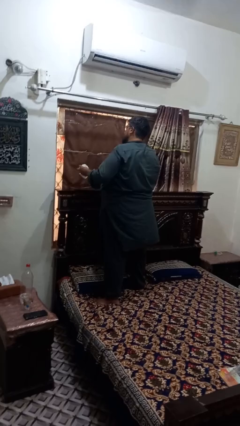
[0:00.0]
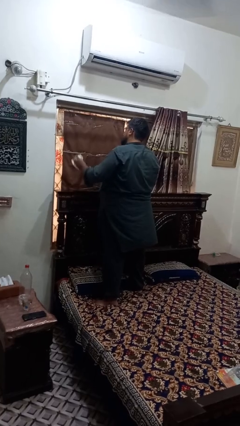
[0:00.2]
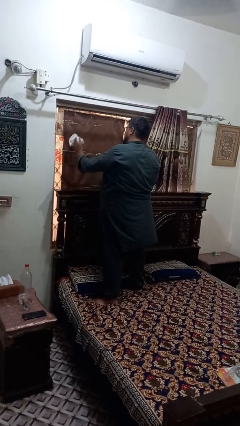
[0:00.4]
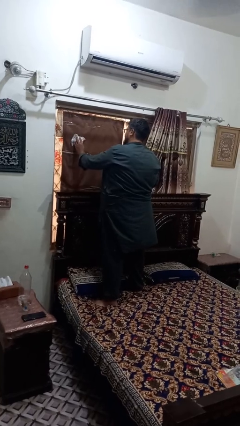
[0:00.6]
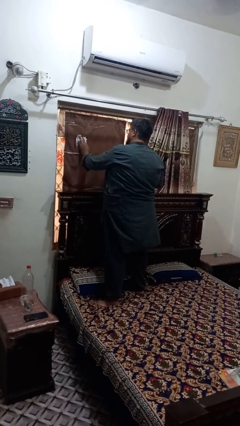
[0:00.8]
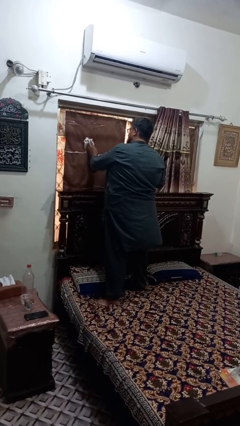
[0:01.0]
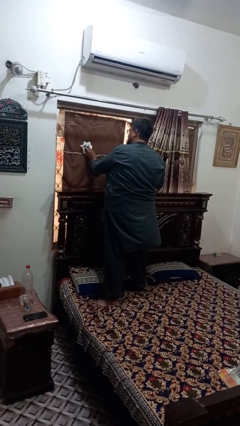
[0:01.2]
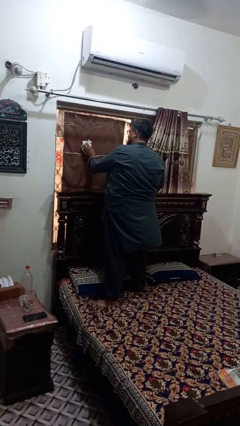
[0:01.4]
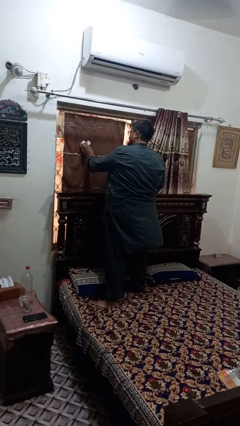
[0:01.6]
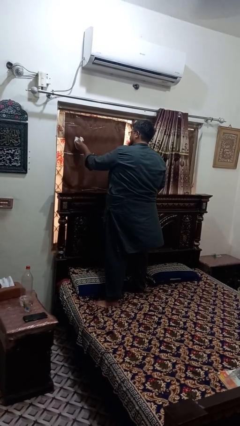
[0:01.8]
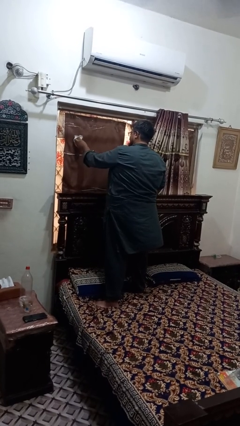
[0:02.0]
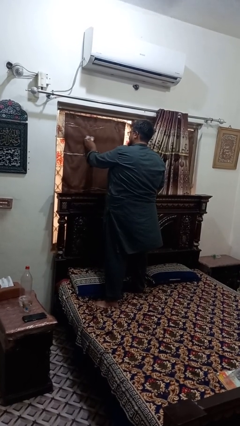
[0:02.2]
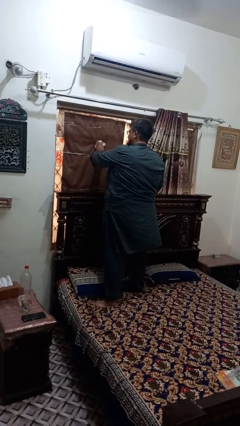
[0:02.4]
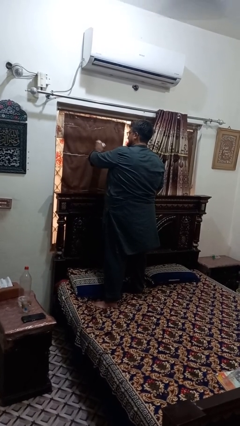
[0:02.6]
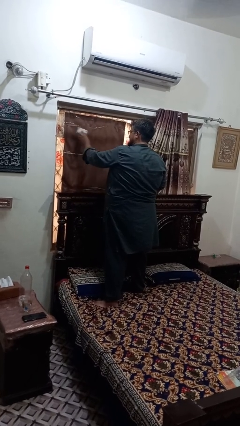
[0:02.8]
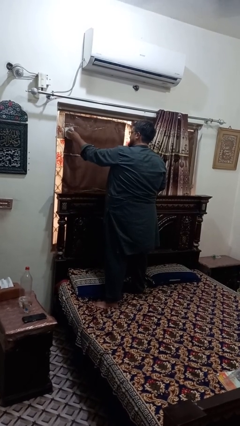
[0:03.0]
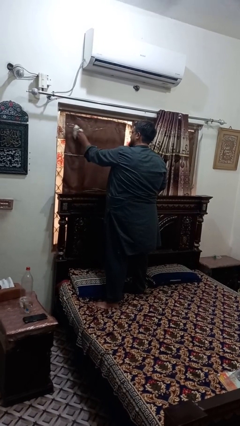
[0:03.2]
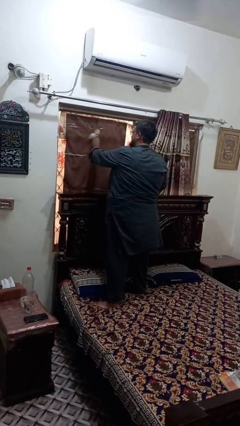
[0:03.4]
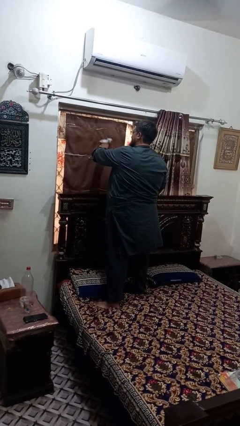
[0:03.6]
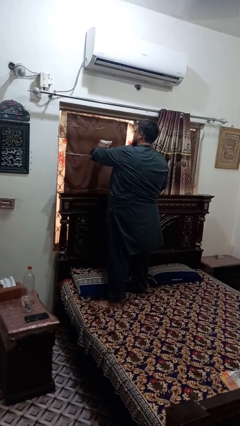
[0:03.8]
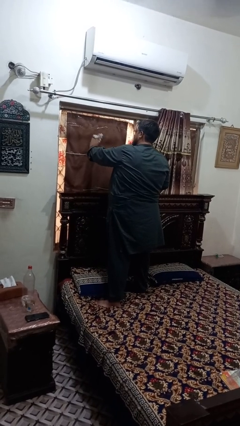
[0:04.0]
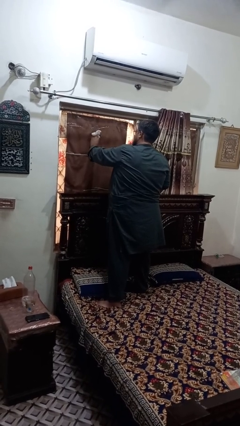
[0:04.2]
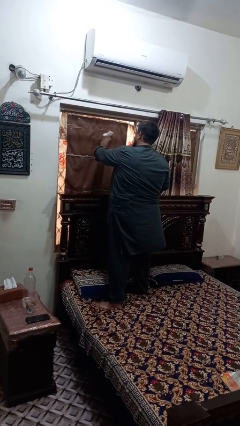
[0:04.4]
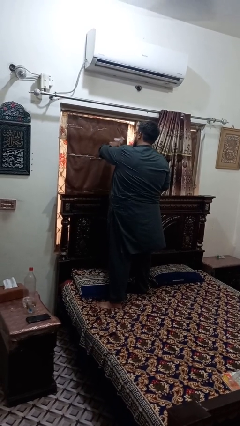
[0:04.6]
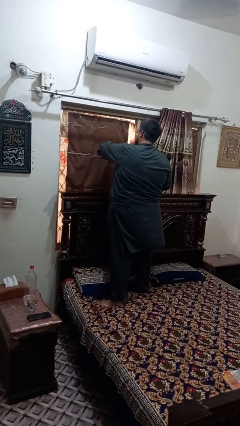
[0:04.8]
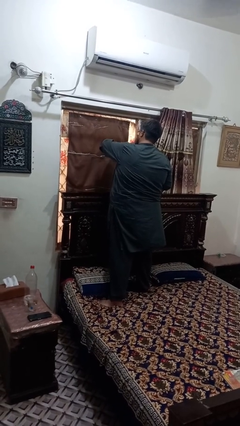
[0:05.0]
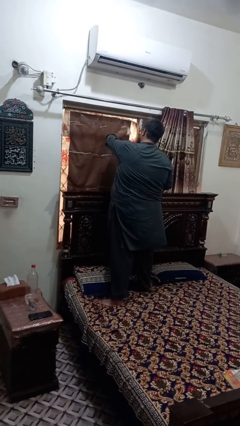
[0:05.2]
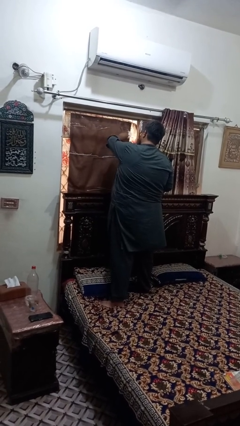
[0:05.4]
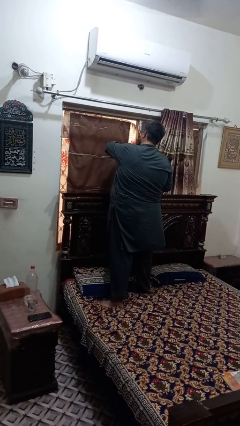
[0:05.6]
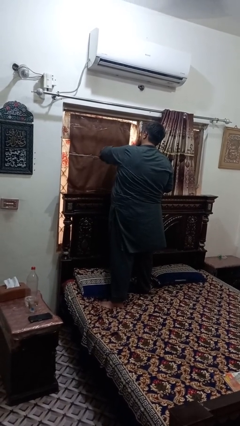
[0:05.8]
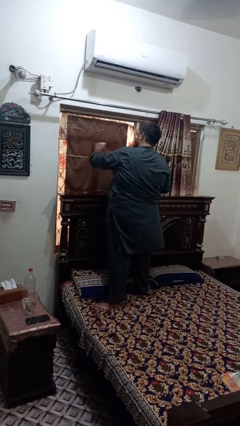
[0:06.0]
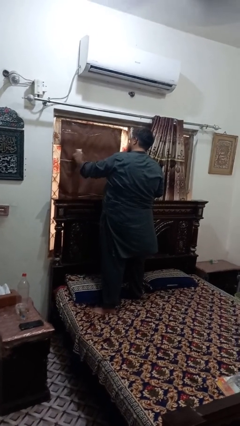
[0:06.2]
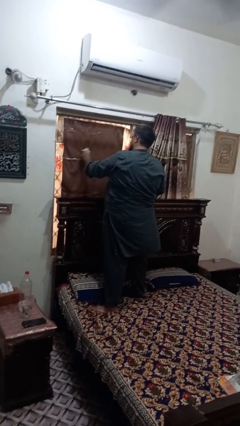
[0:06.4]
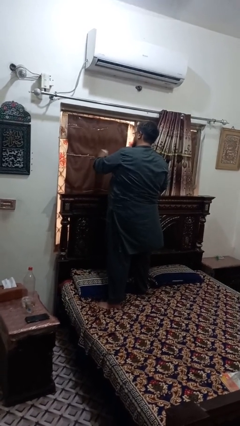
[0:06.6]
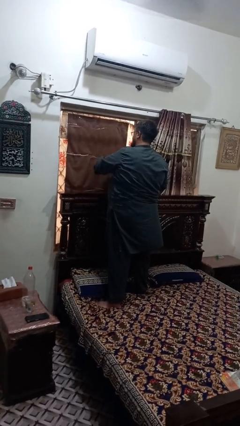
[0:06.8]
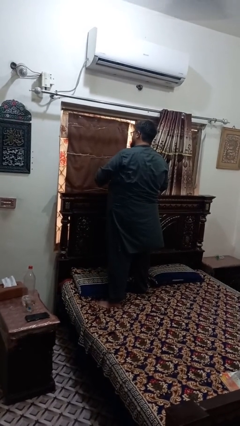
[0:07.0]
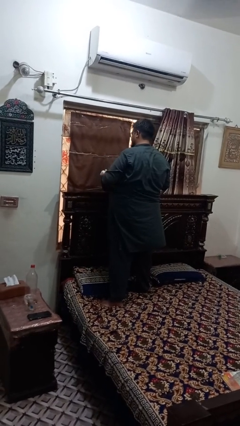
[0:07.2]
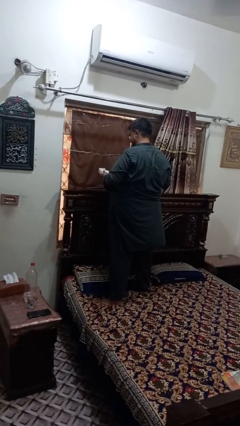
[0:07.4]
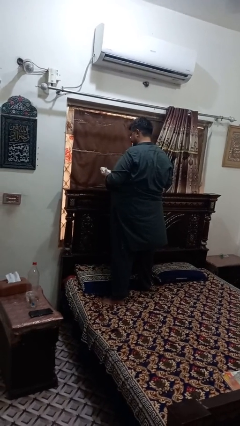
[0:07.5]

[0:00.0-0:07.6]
person washes window

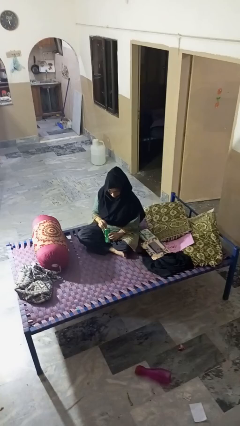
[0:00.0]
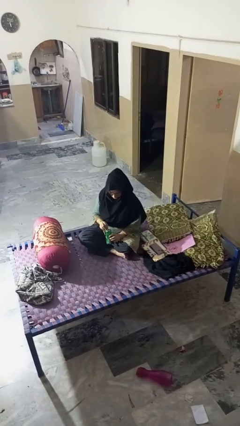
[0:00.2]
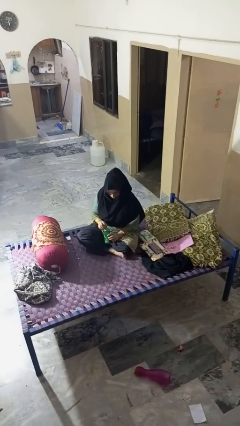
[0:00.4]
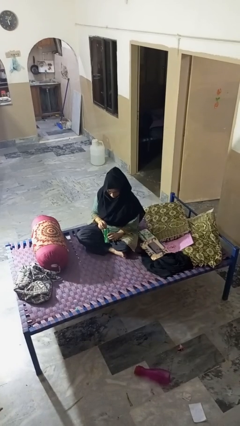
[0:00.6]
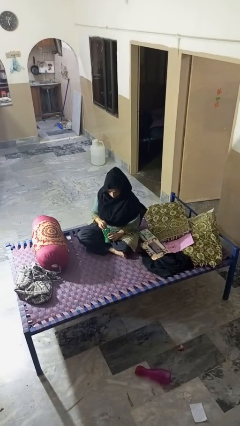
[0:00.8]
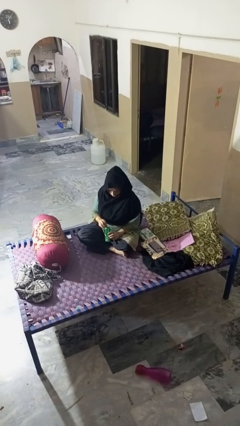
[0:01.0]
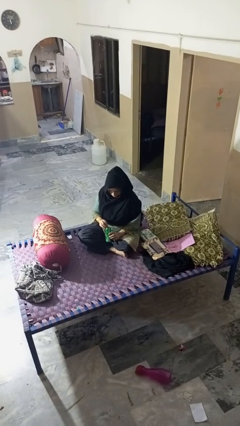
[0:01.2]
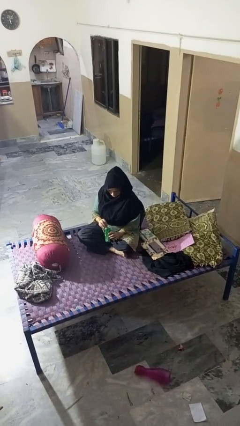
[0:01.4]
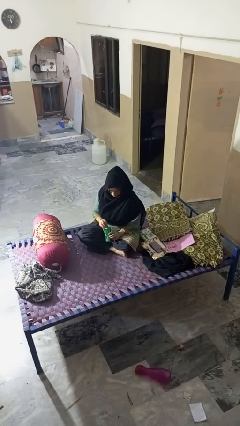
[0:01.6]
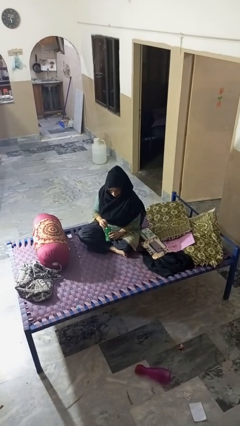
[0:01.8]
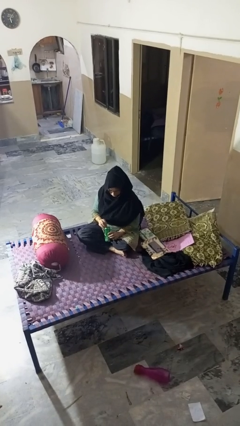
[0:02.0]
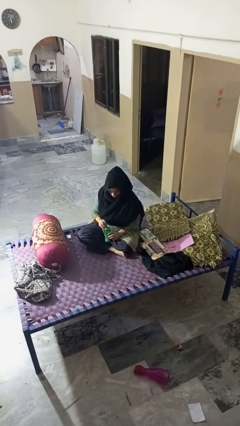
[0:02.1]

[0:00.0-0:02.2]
person opens can with can opener

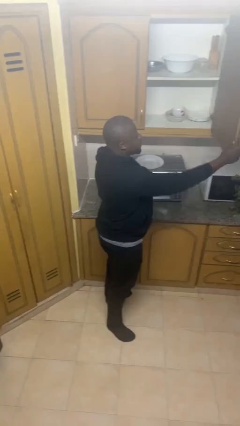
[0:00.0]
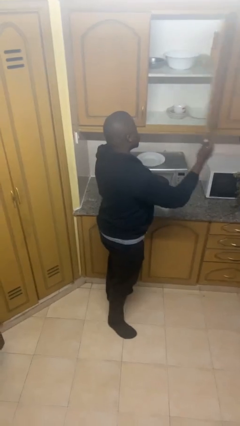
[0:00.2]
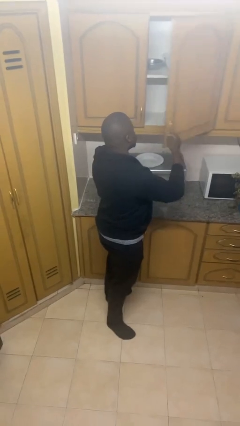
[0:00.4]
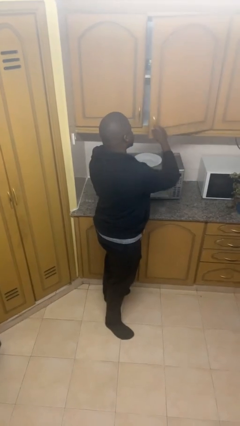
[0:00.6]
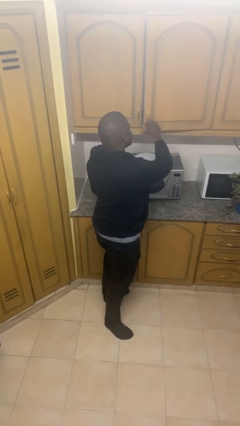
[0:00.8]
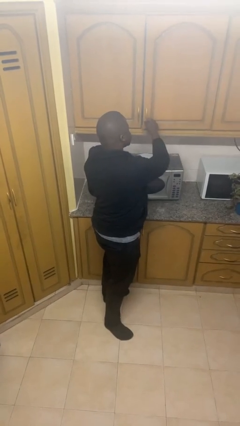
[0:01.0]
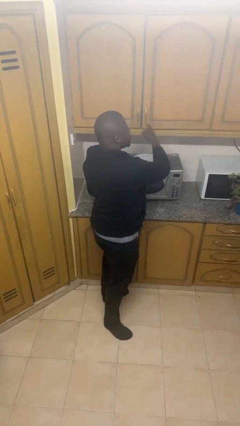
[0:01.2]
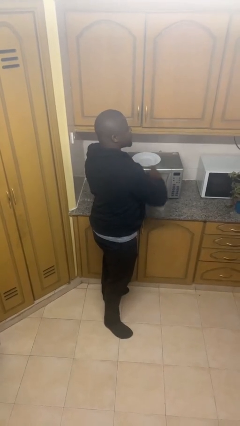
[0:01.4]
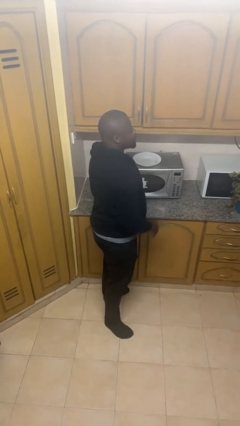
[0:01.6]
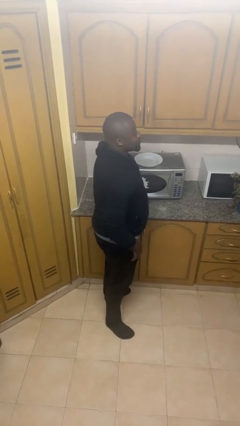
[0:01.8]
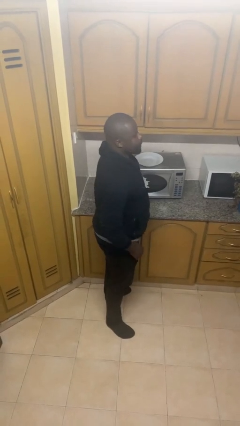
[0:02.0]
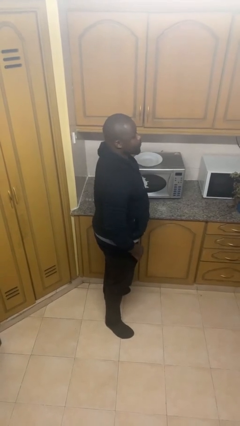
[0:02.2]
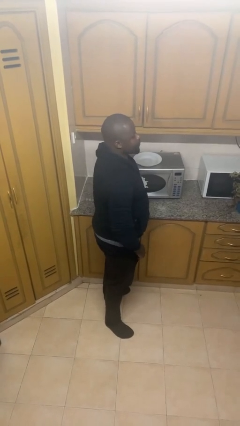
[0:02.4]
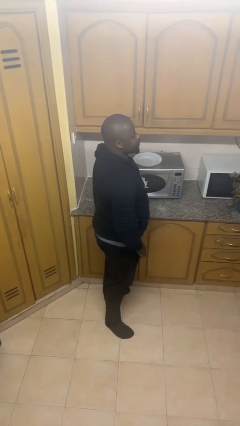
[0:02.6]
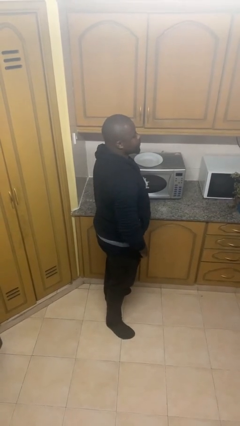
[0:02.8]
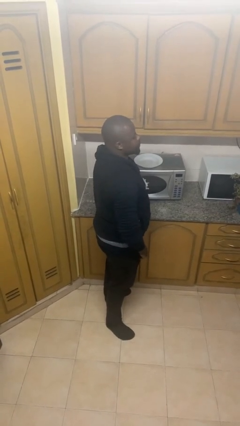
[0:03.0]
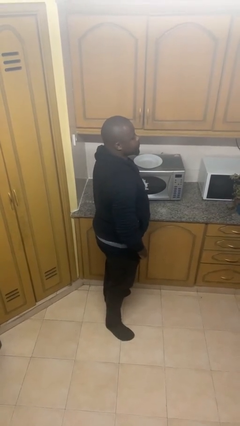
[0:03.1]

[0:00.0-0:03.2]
person closes cabinet

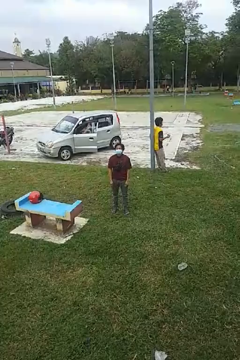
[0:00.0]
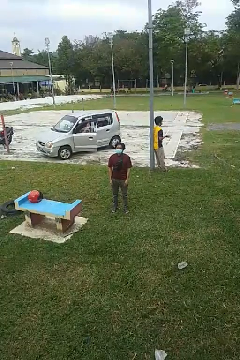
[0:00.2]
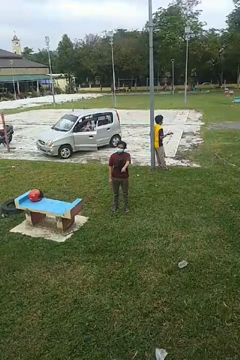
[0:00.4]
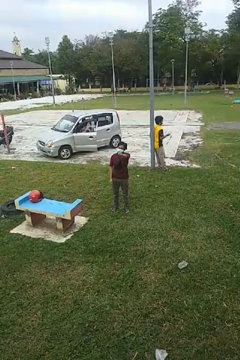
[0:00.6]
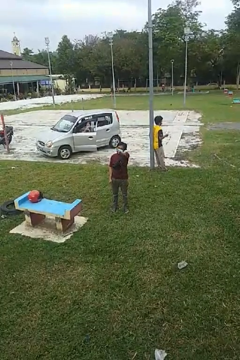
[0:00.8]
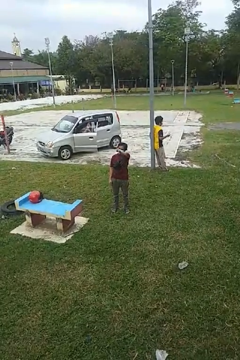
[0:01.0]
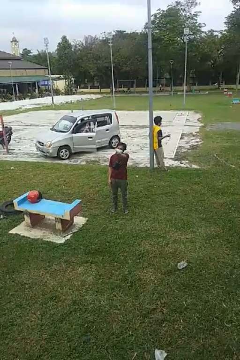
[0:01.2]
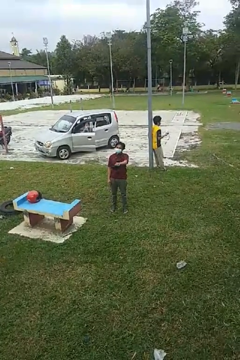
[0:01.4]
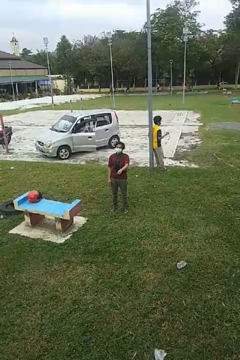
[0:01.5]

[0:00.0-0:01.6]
person points at person

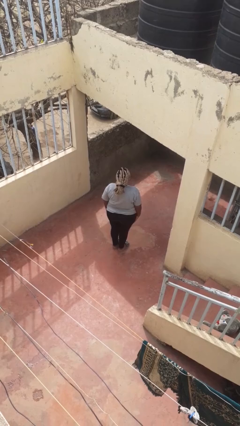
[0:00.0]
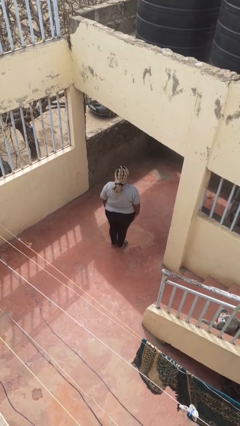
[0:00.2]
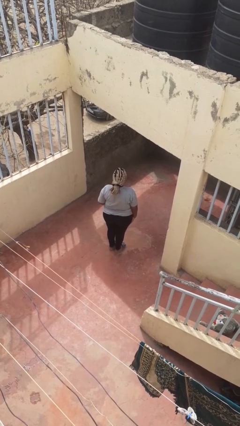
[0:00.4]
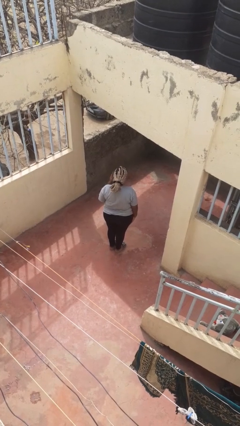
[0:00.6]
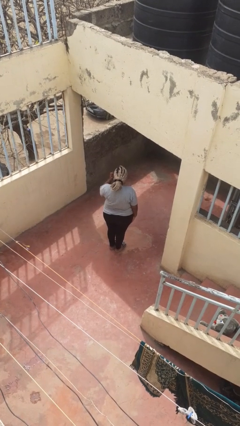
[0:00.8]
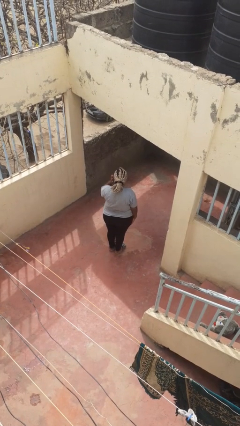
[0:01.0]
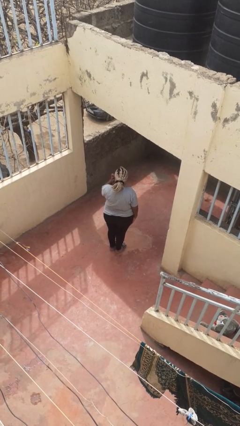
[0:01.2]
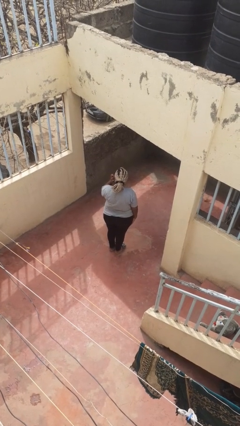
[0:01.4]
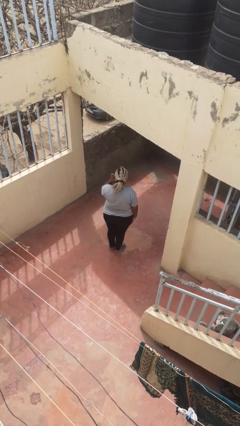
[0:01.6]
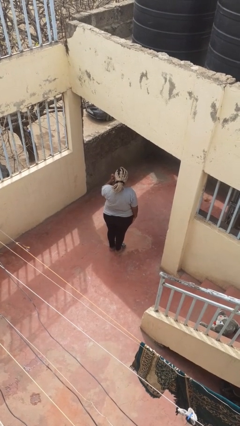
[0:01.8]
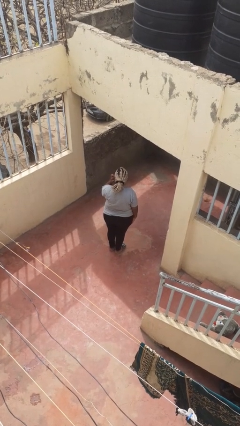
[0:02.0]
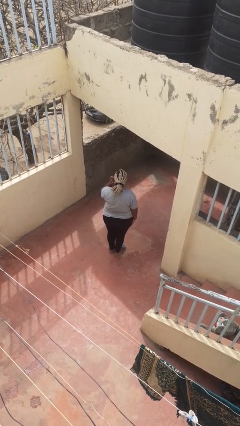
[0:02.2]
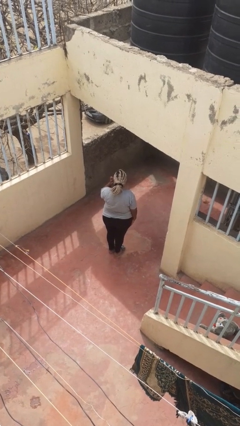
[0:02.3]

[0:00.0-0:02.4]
person gestures listen closely

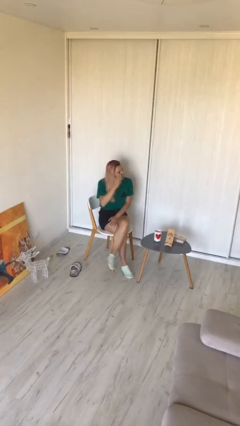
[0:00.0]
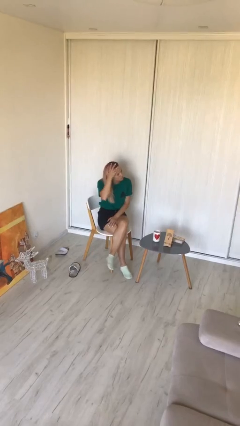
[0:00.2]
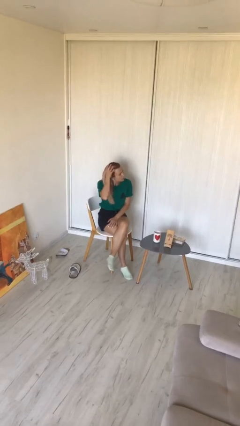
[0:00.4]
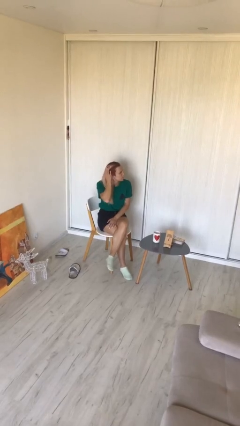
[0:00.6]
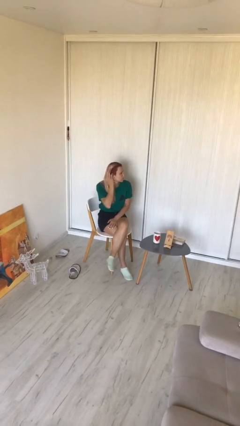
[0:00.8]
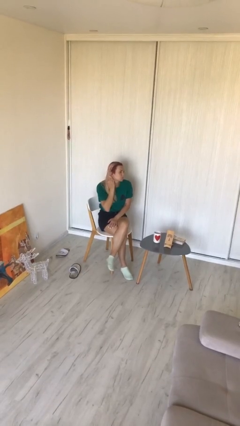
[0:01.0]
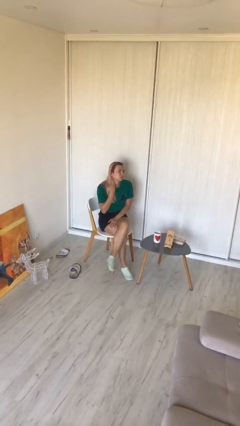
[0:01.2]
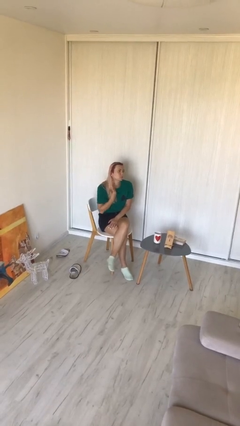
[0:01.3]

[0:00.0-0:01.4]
person strokes hair
